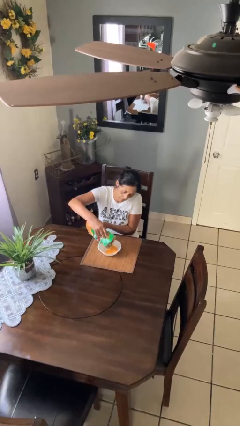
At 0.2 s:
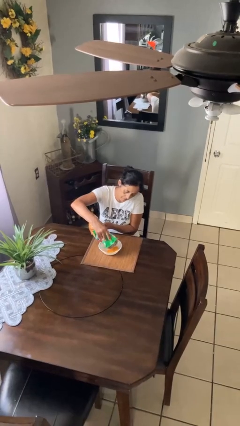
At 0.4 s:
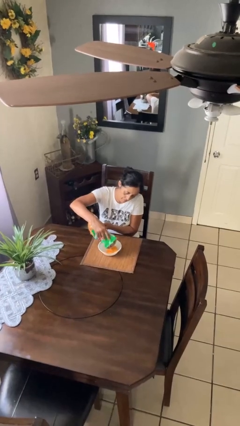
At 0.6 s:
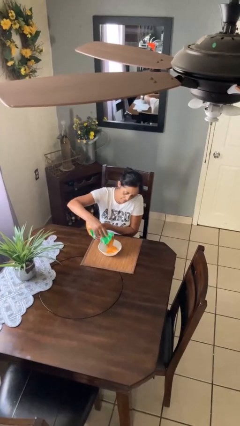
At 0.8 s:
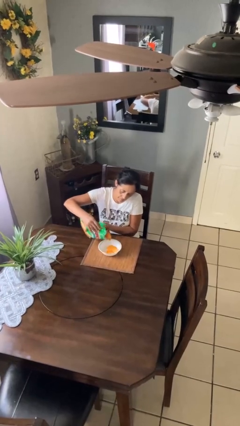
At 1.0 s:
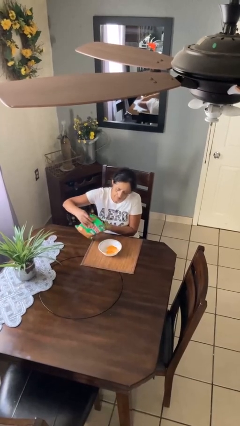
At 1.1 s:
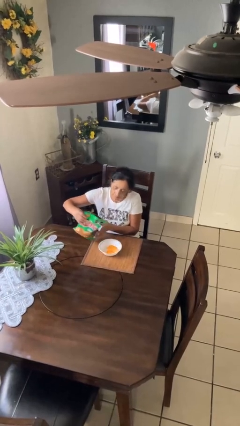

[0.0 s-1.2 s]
person pours into bowl

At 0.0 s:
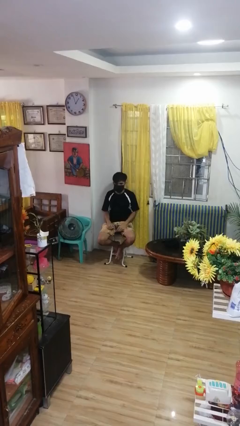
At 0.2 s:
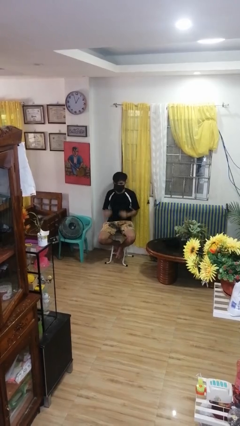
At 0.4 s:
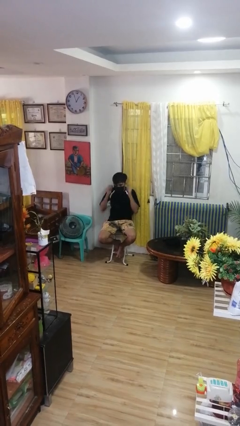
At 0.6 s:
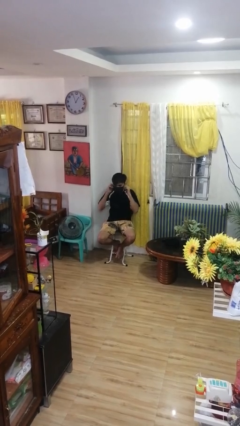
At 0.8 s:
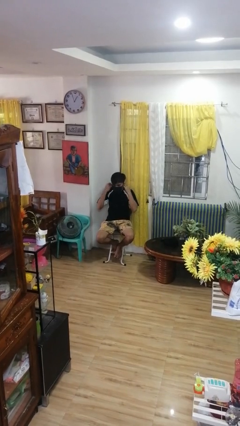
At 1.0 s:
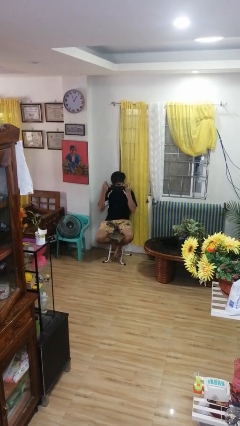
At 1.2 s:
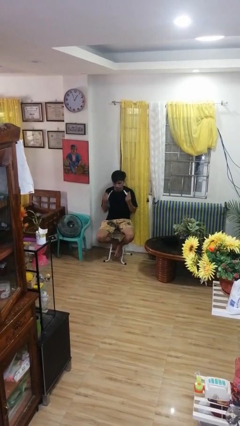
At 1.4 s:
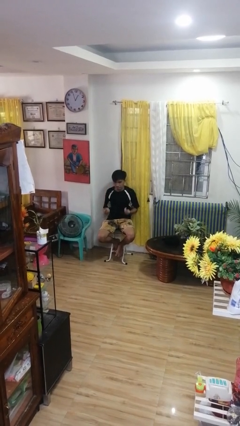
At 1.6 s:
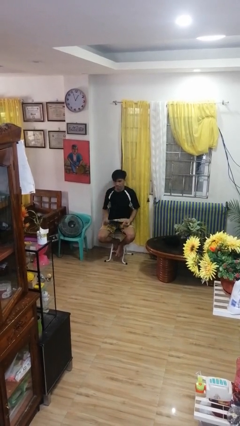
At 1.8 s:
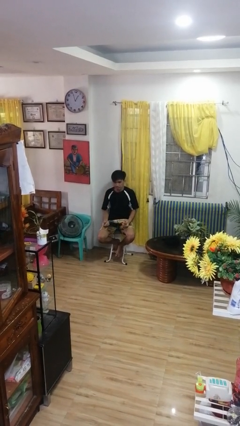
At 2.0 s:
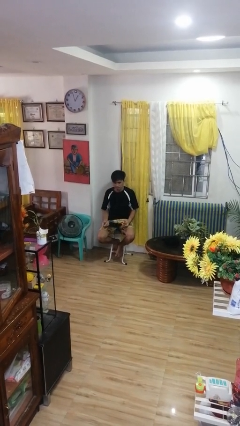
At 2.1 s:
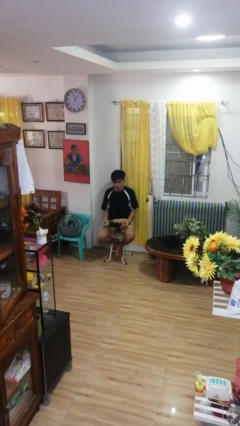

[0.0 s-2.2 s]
person takes off facemask

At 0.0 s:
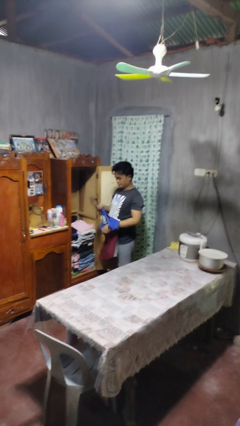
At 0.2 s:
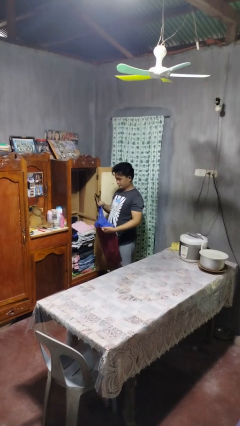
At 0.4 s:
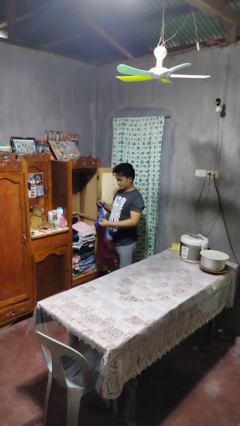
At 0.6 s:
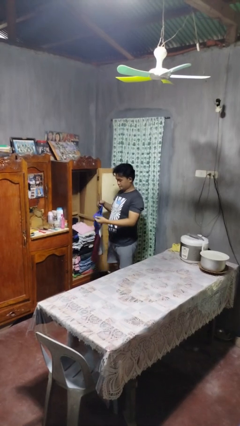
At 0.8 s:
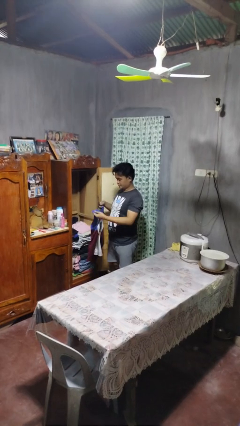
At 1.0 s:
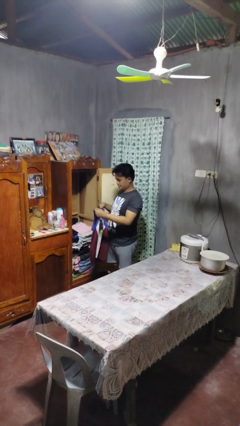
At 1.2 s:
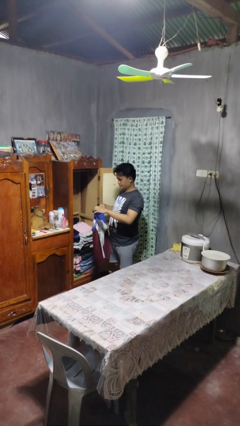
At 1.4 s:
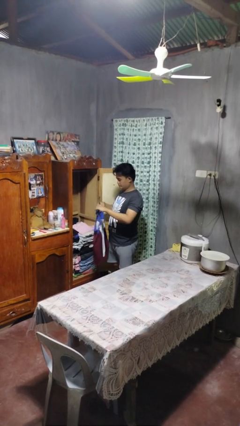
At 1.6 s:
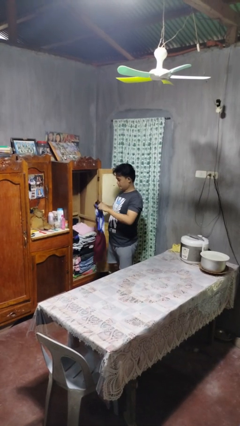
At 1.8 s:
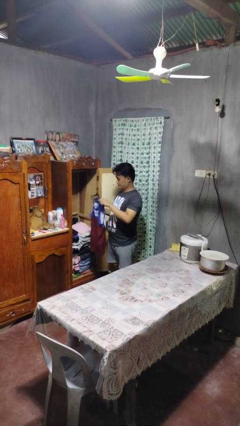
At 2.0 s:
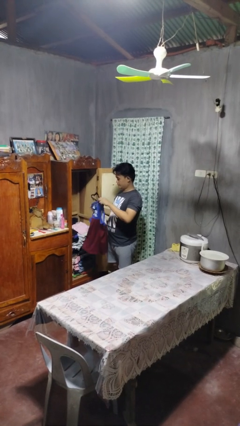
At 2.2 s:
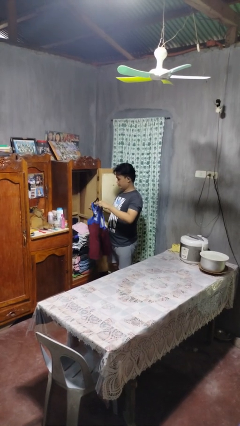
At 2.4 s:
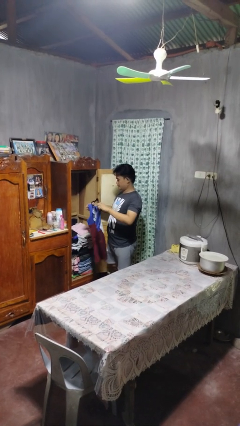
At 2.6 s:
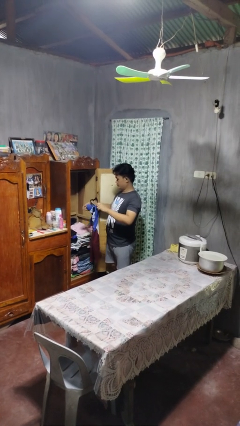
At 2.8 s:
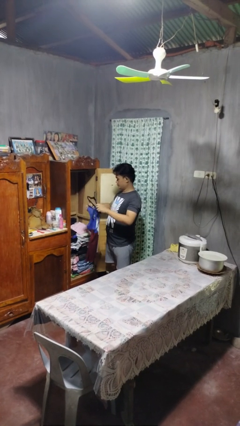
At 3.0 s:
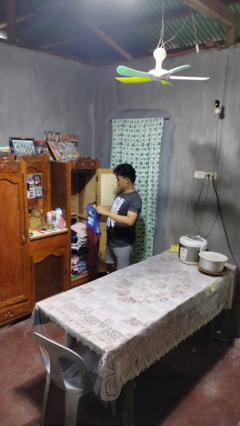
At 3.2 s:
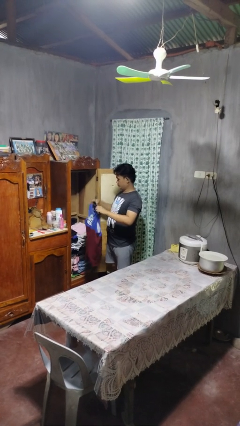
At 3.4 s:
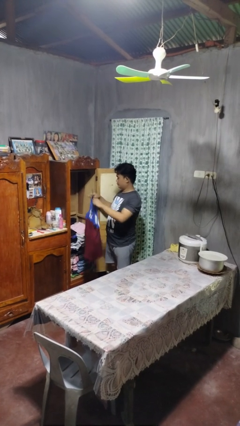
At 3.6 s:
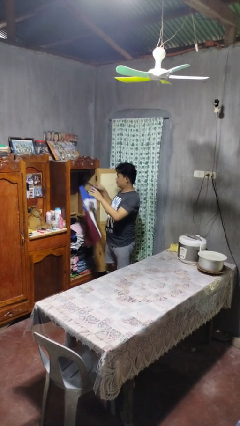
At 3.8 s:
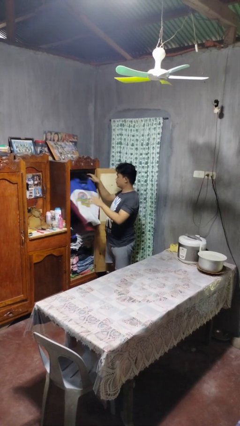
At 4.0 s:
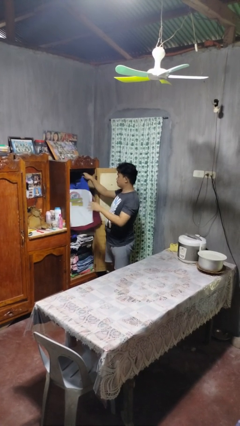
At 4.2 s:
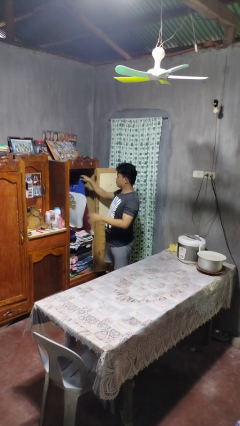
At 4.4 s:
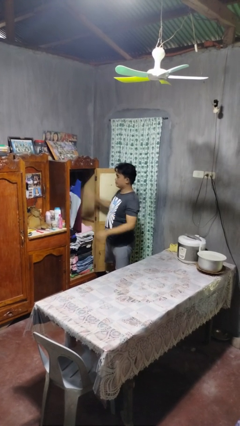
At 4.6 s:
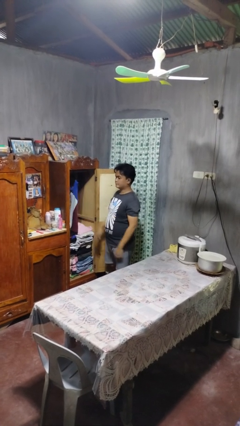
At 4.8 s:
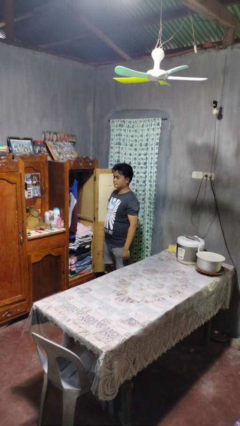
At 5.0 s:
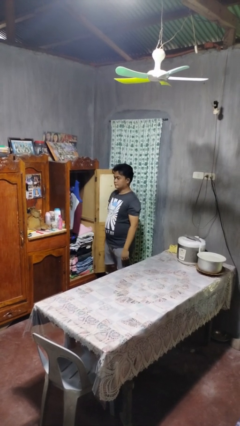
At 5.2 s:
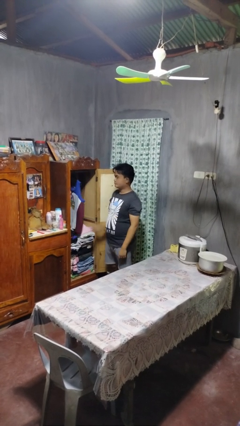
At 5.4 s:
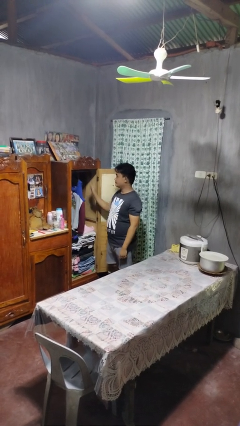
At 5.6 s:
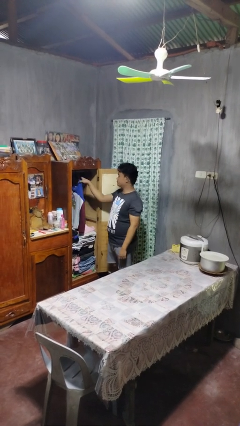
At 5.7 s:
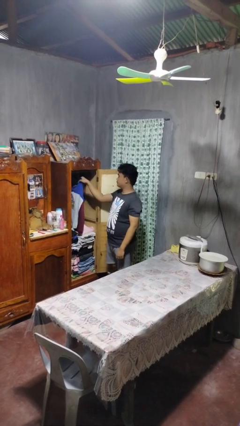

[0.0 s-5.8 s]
person puts clothes into closet

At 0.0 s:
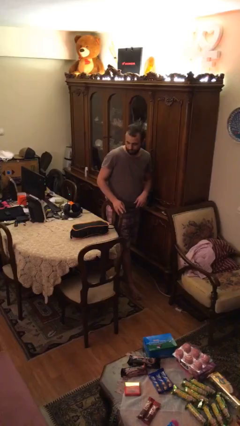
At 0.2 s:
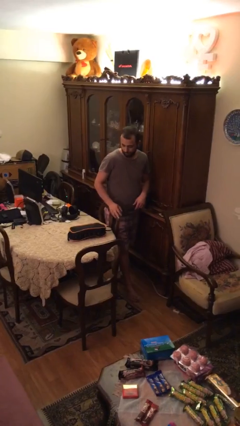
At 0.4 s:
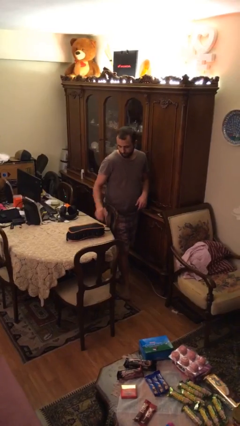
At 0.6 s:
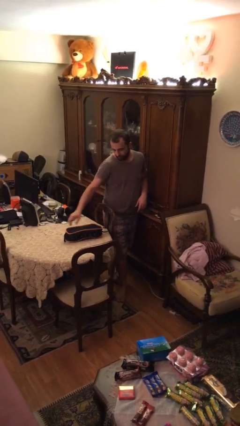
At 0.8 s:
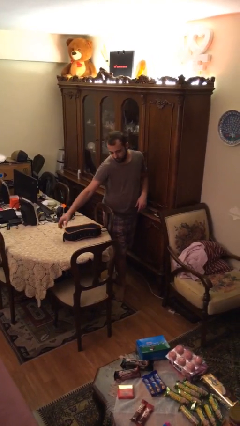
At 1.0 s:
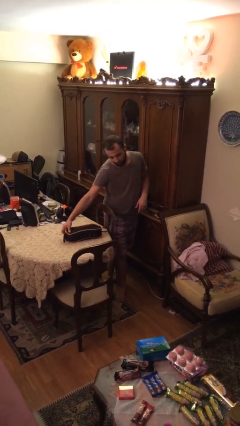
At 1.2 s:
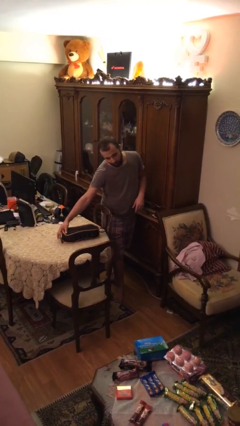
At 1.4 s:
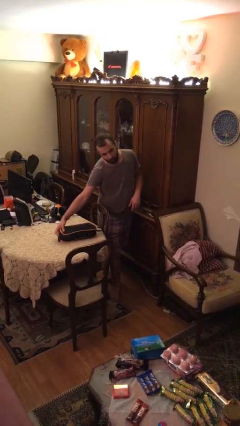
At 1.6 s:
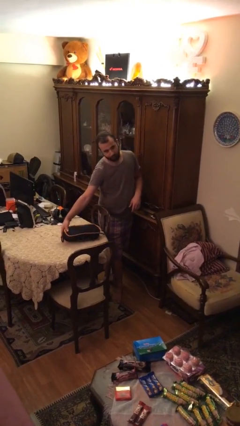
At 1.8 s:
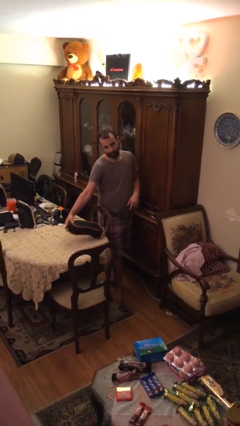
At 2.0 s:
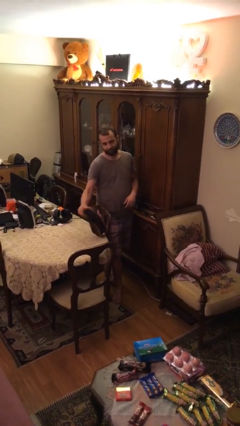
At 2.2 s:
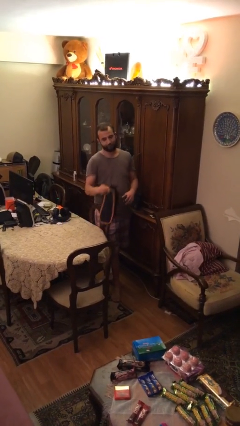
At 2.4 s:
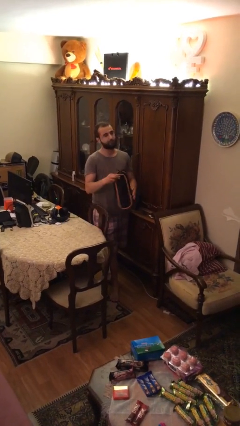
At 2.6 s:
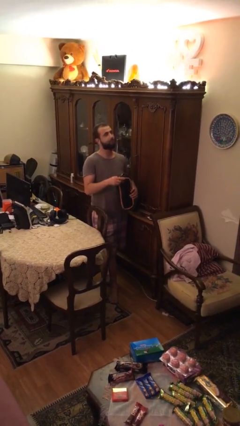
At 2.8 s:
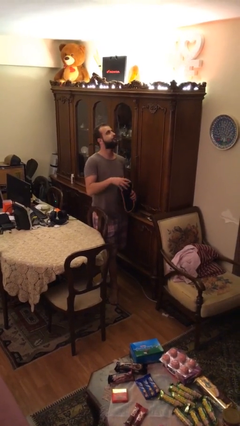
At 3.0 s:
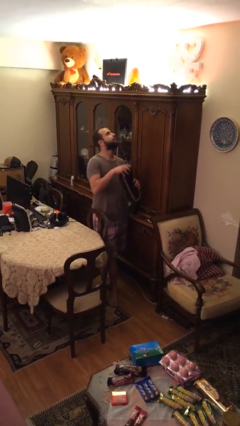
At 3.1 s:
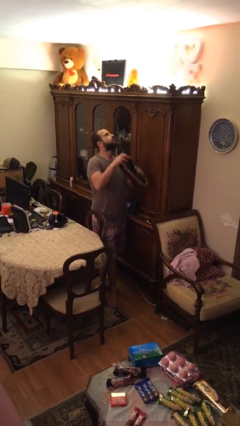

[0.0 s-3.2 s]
person picks up object from table

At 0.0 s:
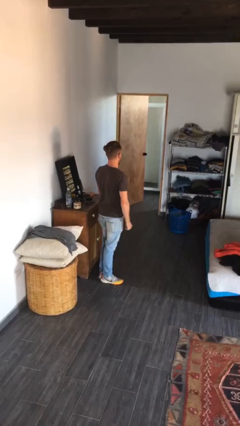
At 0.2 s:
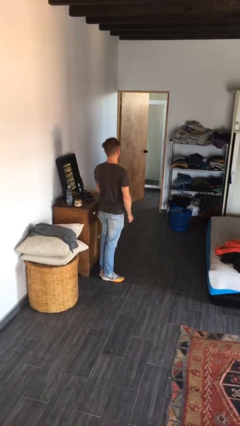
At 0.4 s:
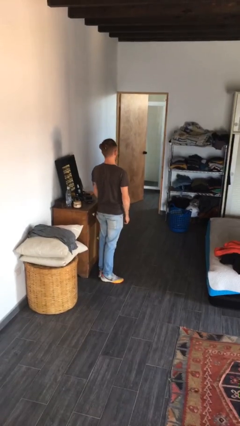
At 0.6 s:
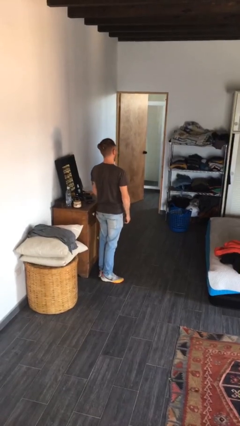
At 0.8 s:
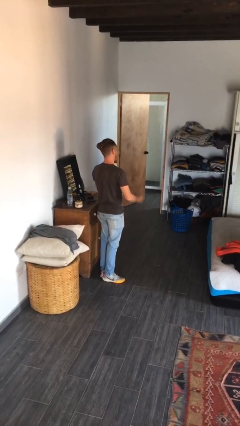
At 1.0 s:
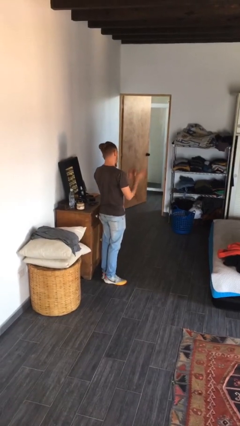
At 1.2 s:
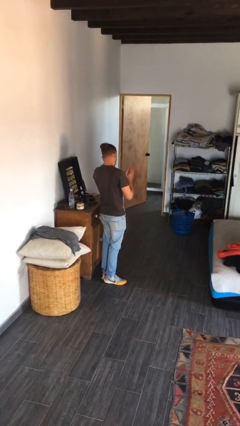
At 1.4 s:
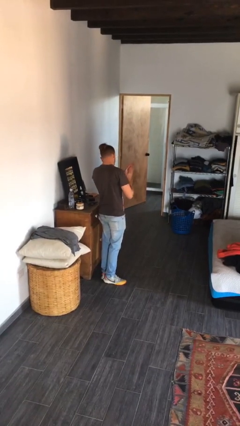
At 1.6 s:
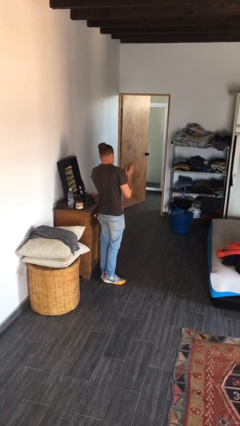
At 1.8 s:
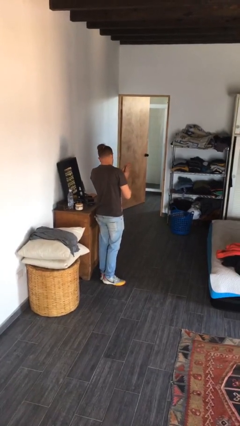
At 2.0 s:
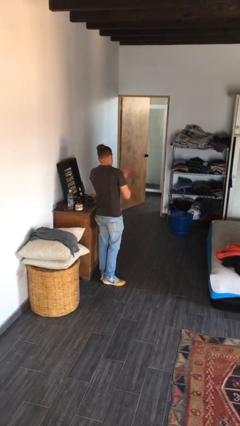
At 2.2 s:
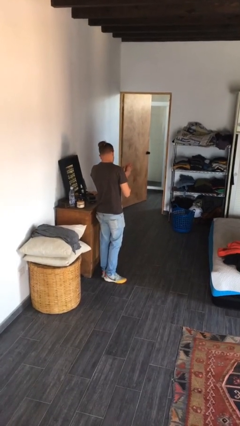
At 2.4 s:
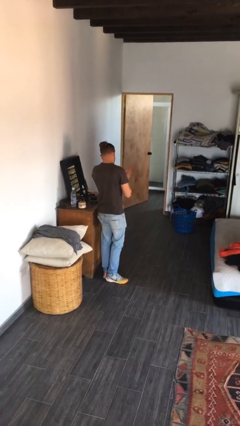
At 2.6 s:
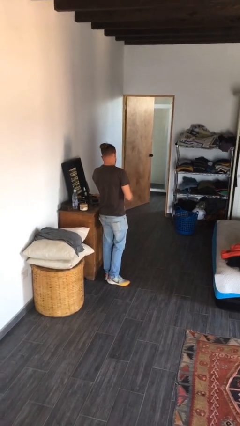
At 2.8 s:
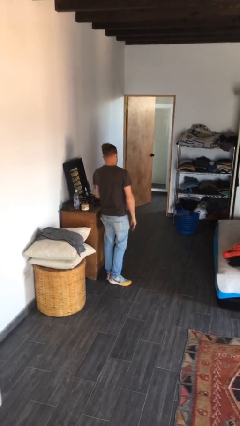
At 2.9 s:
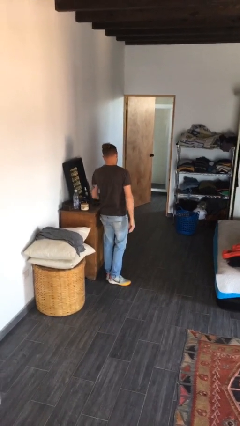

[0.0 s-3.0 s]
person claps hands

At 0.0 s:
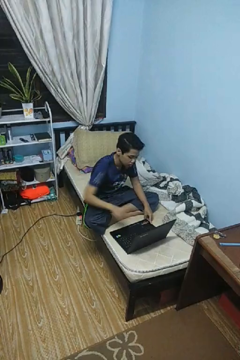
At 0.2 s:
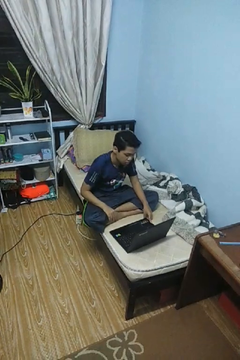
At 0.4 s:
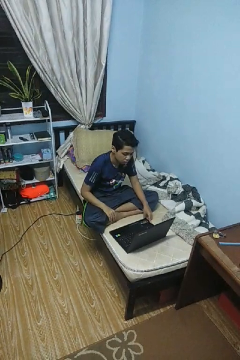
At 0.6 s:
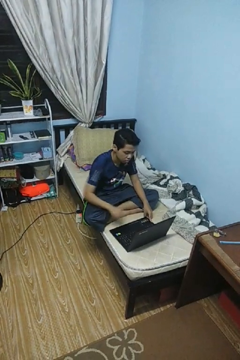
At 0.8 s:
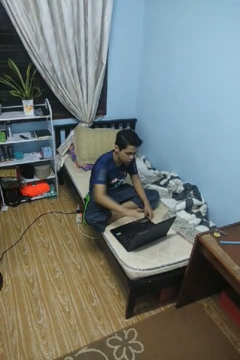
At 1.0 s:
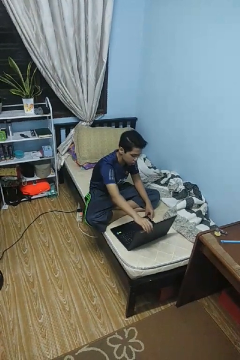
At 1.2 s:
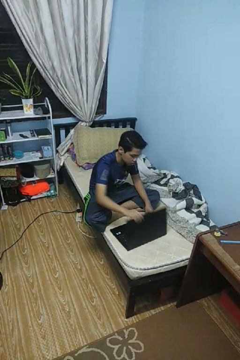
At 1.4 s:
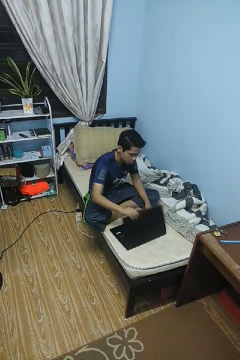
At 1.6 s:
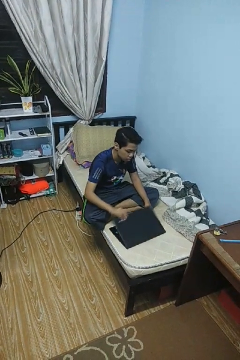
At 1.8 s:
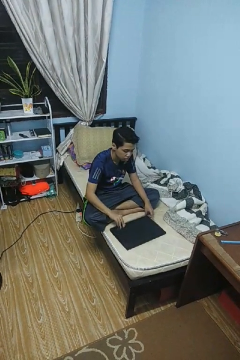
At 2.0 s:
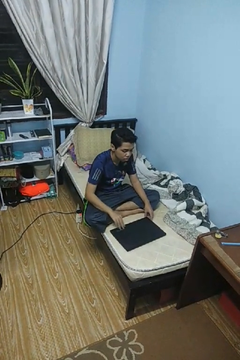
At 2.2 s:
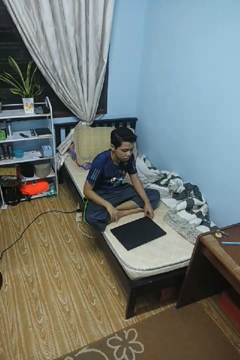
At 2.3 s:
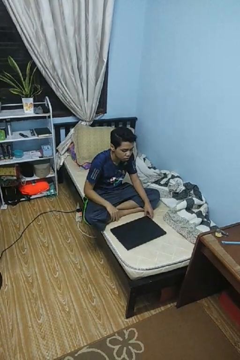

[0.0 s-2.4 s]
person closes laptop
